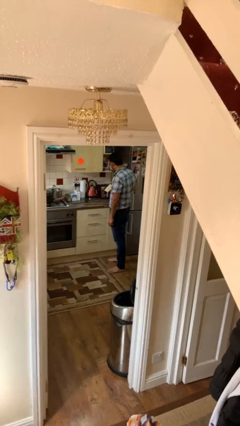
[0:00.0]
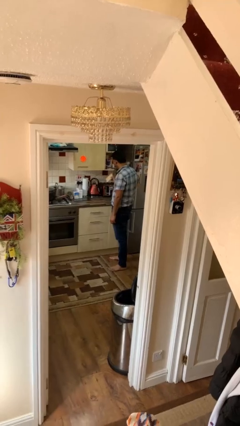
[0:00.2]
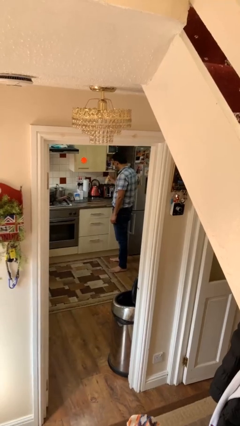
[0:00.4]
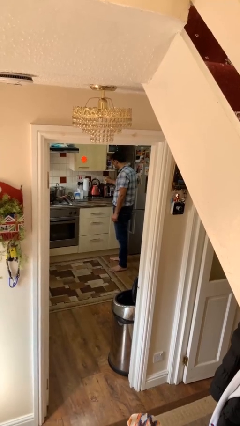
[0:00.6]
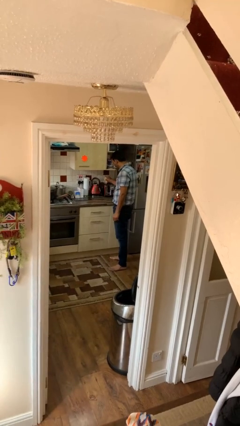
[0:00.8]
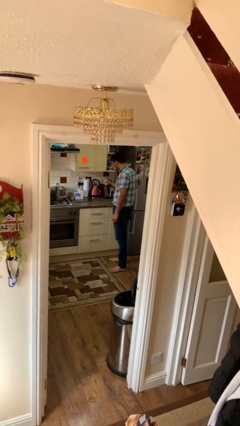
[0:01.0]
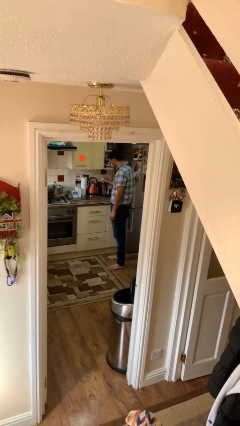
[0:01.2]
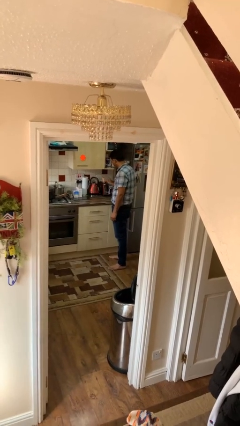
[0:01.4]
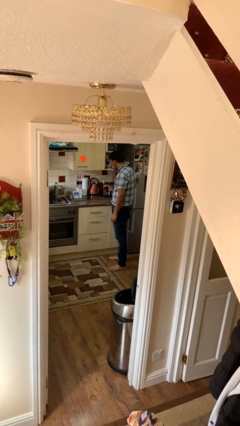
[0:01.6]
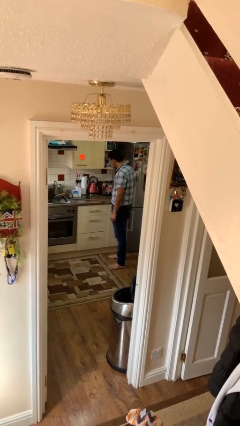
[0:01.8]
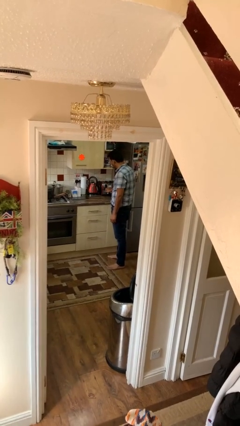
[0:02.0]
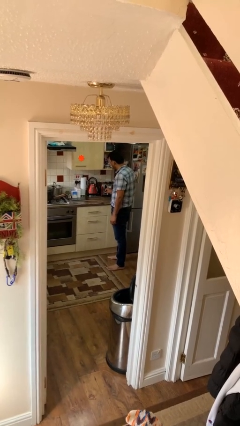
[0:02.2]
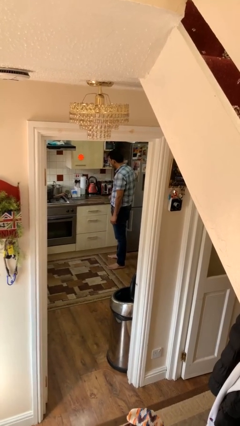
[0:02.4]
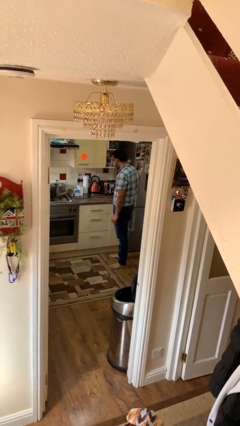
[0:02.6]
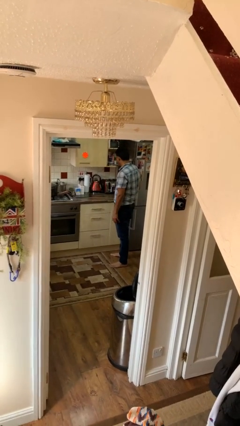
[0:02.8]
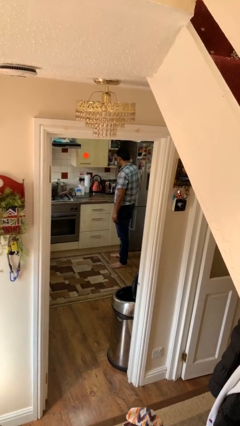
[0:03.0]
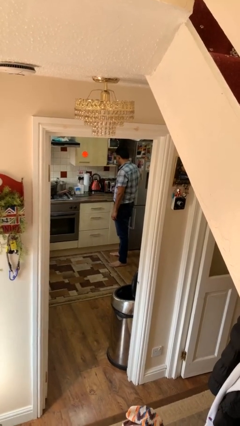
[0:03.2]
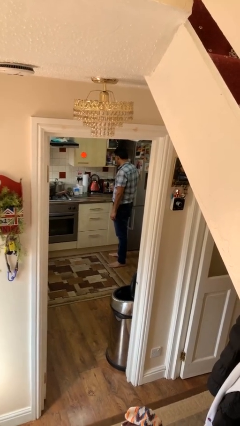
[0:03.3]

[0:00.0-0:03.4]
person puts object into toaster

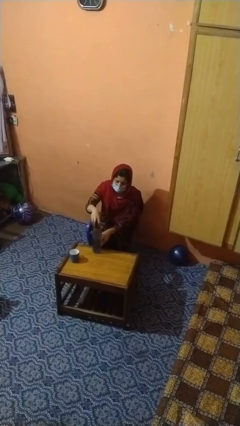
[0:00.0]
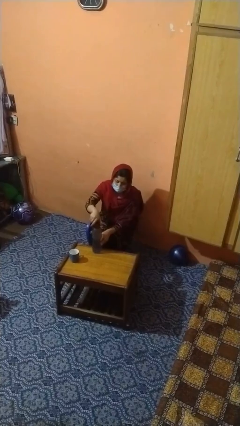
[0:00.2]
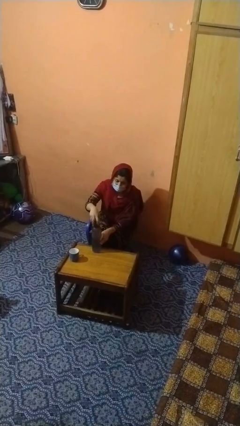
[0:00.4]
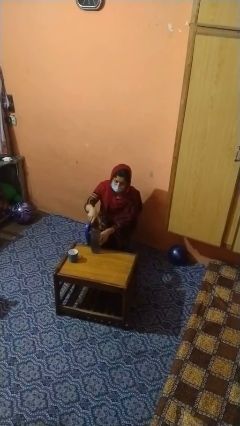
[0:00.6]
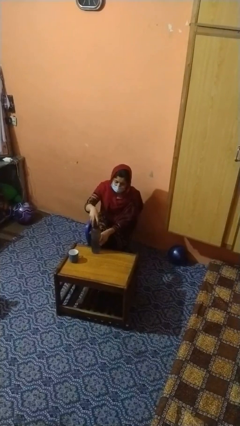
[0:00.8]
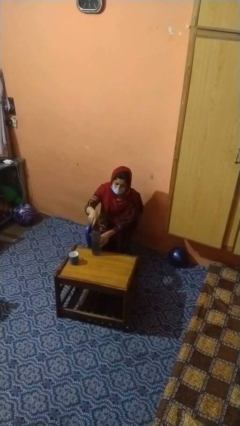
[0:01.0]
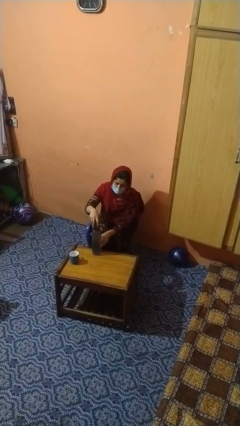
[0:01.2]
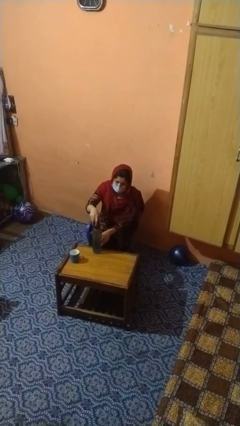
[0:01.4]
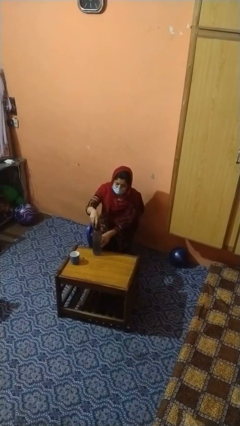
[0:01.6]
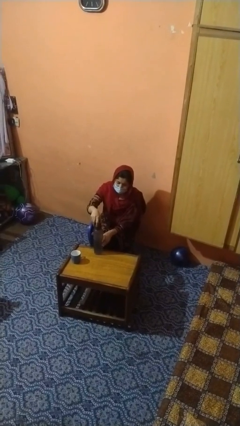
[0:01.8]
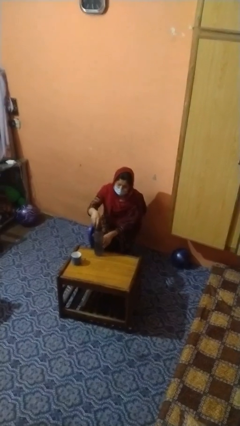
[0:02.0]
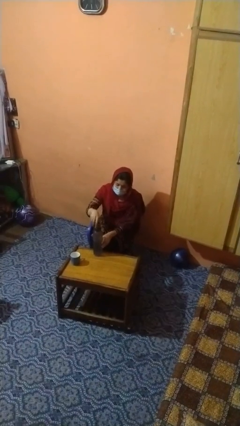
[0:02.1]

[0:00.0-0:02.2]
person screws lid to bottle

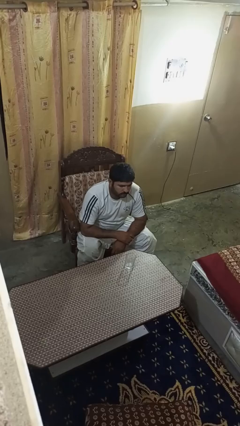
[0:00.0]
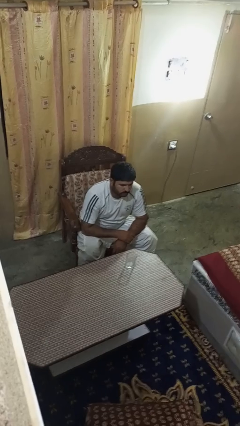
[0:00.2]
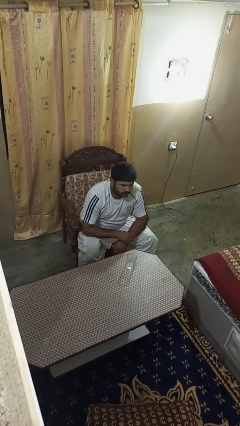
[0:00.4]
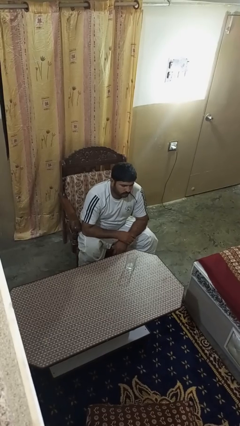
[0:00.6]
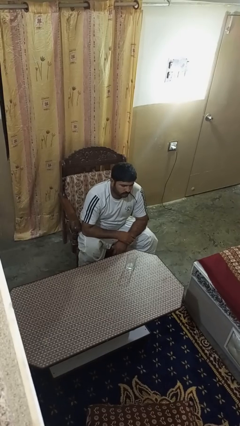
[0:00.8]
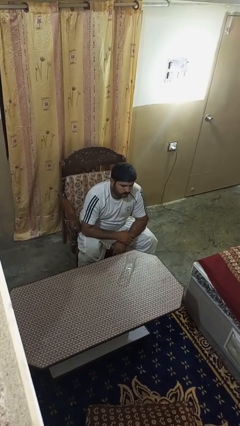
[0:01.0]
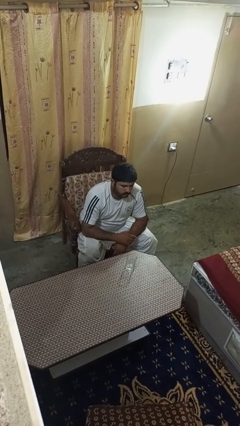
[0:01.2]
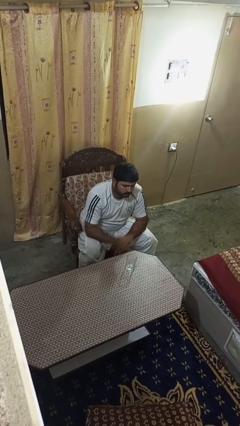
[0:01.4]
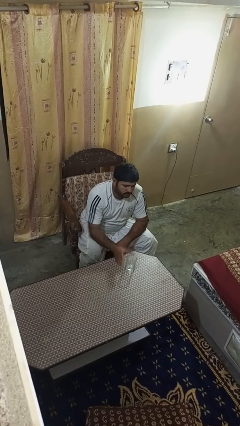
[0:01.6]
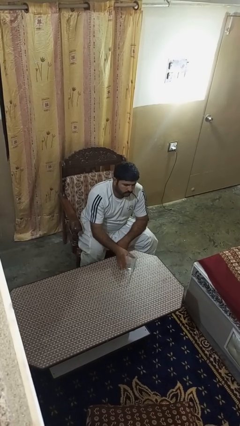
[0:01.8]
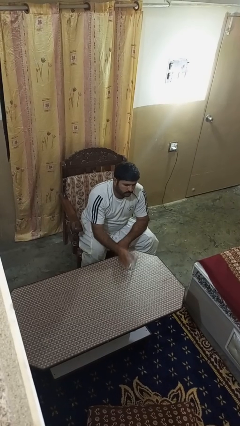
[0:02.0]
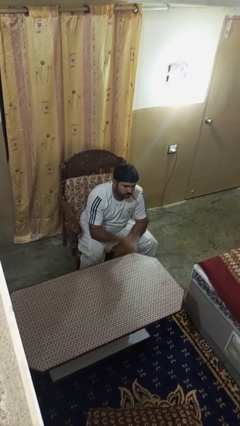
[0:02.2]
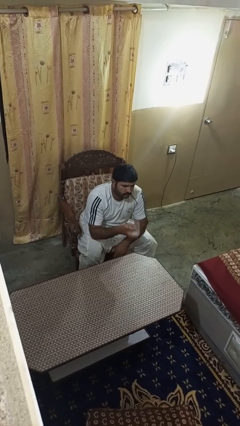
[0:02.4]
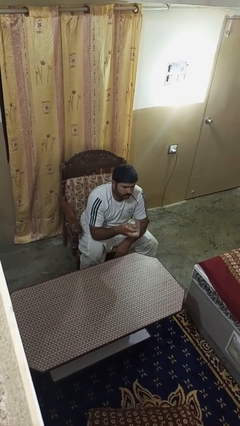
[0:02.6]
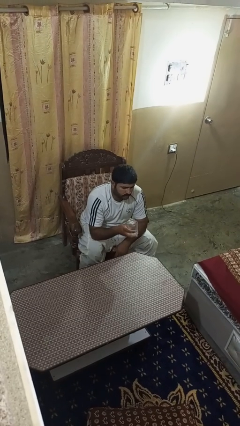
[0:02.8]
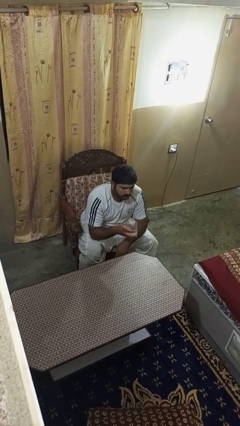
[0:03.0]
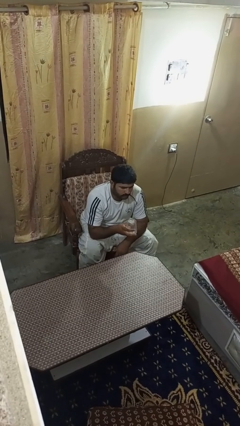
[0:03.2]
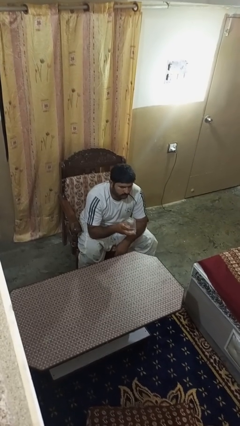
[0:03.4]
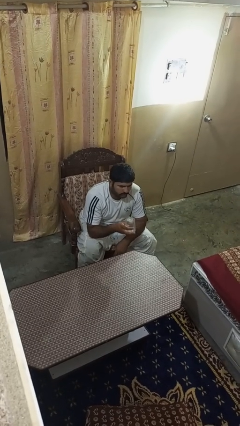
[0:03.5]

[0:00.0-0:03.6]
person picks up object from table

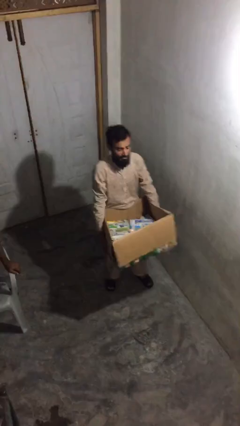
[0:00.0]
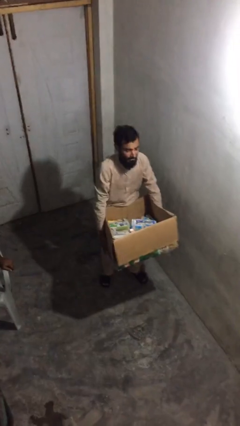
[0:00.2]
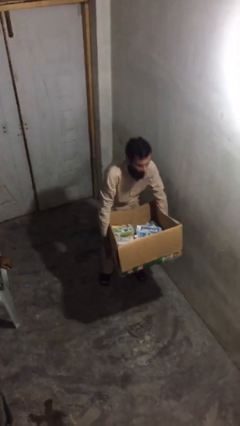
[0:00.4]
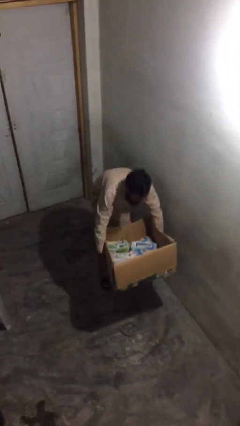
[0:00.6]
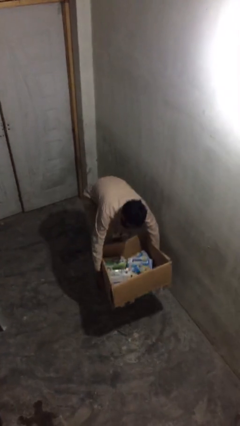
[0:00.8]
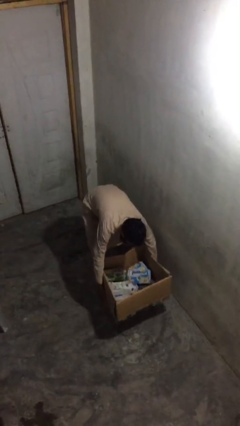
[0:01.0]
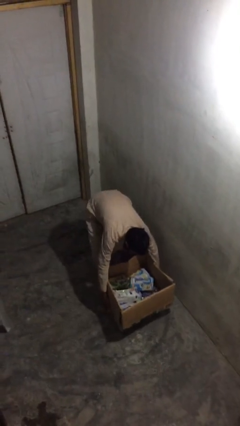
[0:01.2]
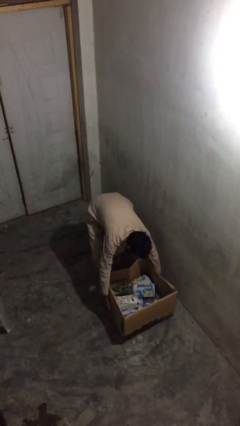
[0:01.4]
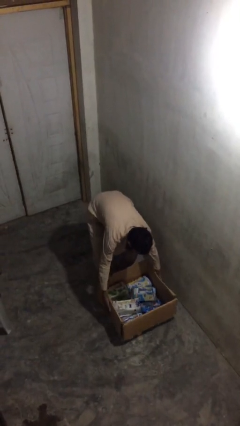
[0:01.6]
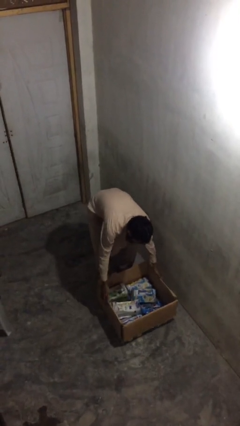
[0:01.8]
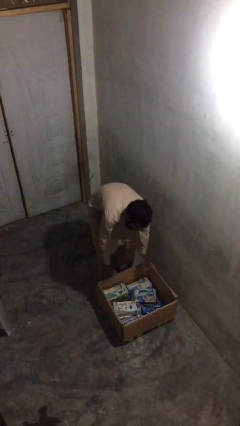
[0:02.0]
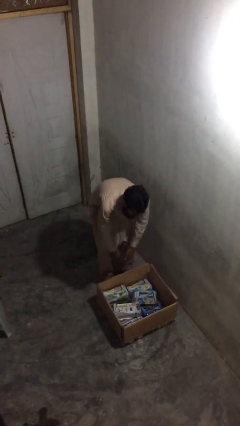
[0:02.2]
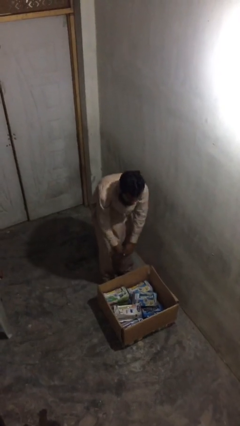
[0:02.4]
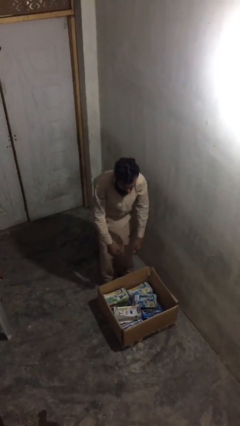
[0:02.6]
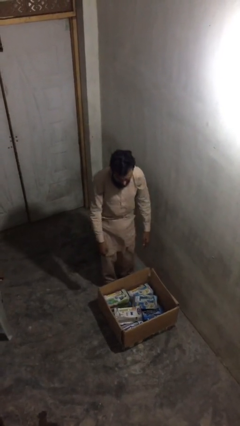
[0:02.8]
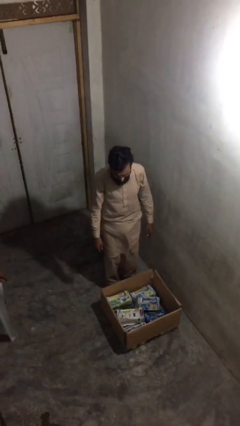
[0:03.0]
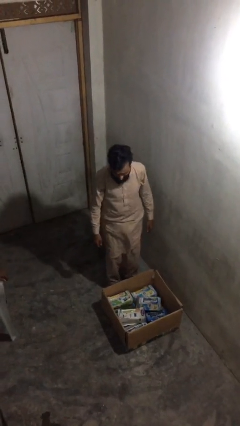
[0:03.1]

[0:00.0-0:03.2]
person puts down object on floor

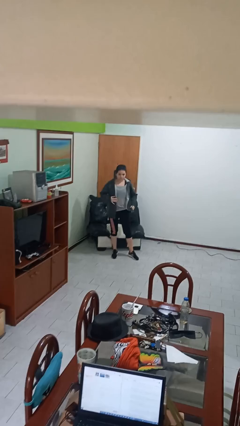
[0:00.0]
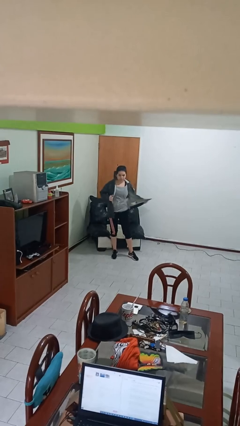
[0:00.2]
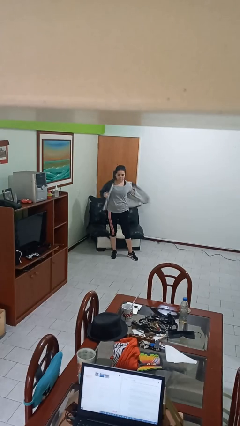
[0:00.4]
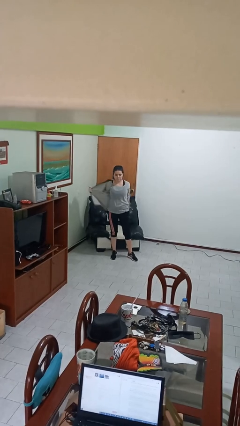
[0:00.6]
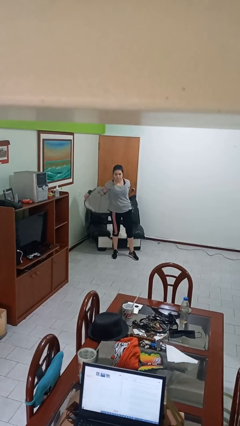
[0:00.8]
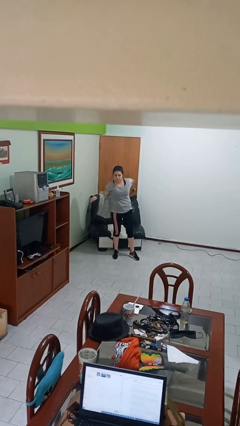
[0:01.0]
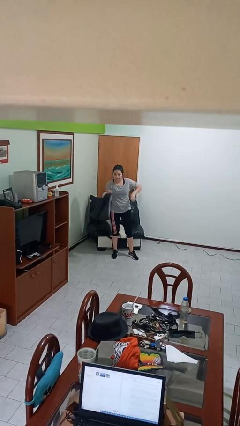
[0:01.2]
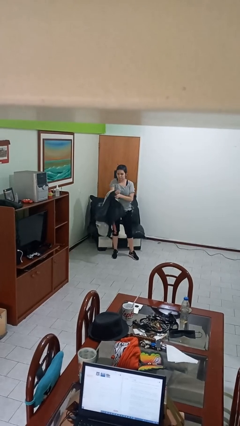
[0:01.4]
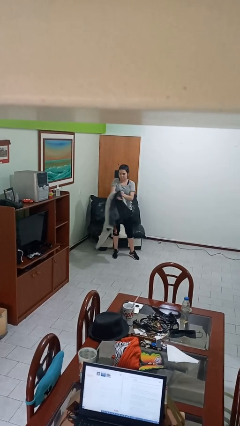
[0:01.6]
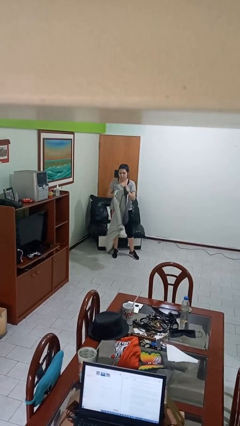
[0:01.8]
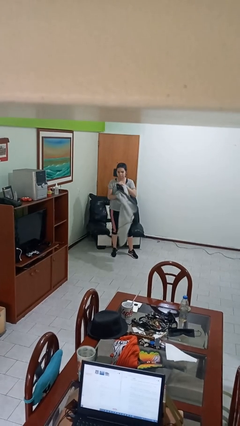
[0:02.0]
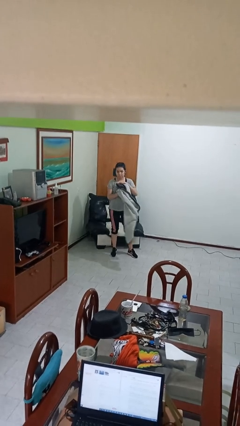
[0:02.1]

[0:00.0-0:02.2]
person takes off jacket

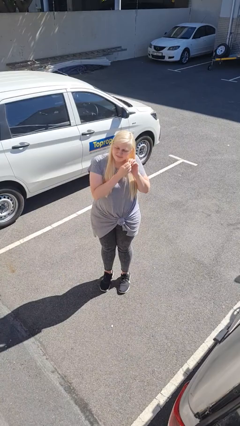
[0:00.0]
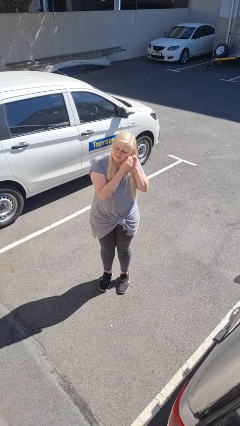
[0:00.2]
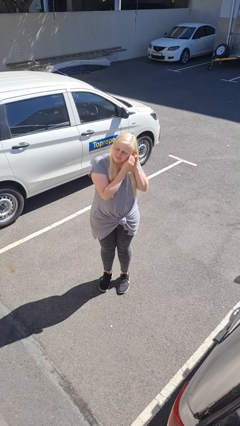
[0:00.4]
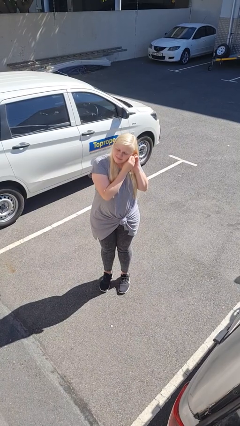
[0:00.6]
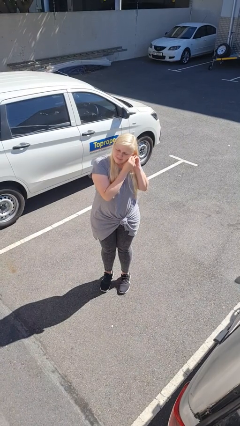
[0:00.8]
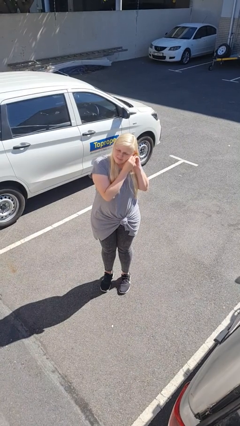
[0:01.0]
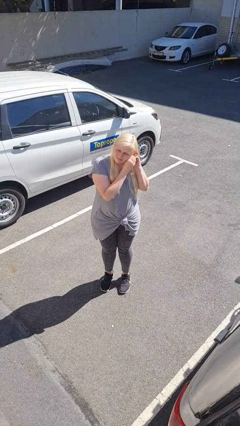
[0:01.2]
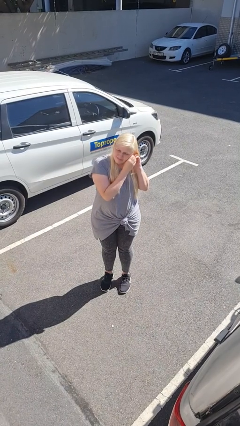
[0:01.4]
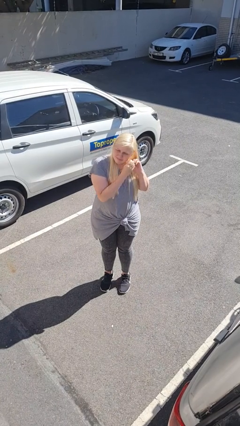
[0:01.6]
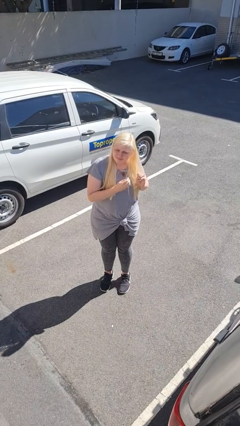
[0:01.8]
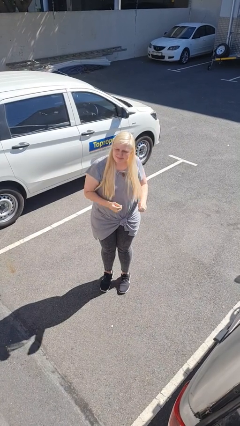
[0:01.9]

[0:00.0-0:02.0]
person takes off earrings

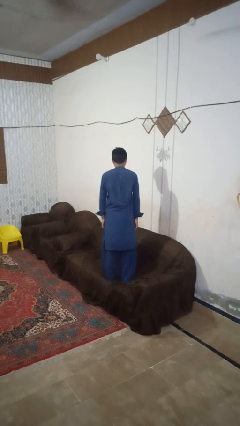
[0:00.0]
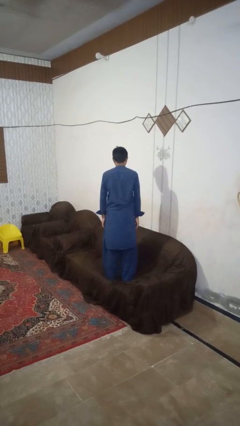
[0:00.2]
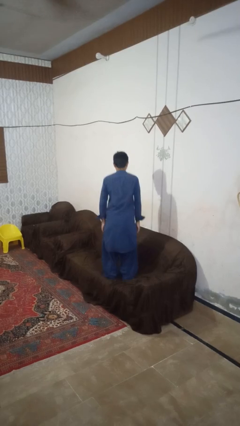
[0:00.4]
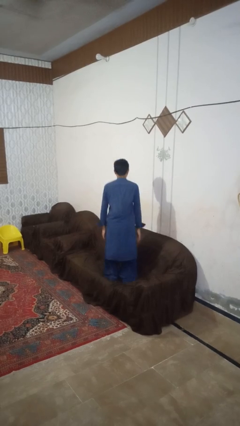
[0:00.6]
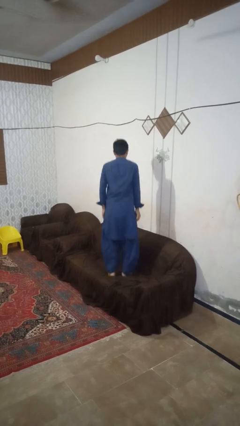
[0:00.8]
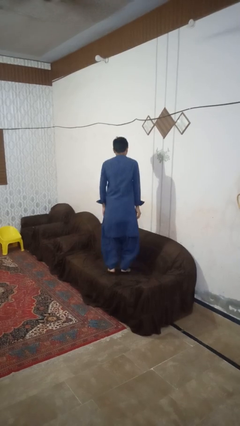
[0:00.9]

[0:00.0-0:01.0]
person jumps on couch
